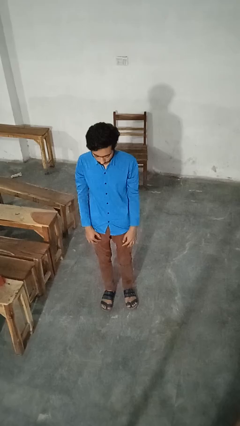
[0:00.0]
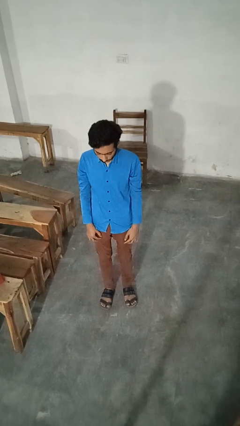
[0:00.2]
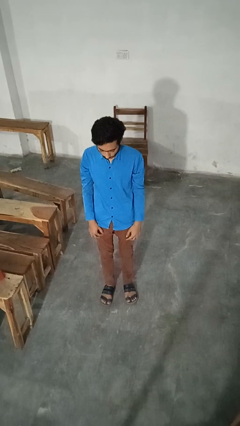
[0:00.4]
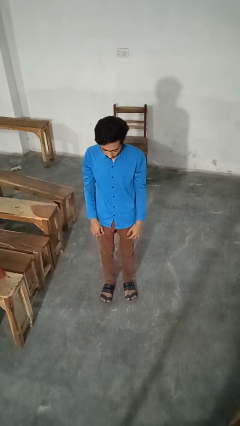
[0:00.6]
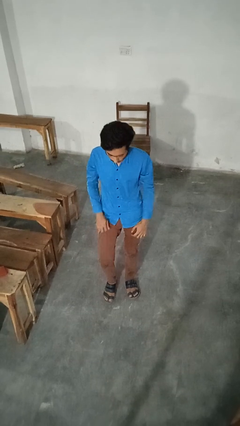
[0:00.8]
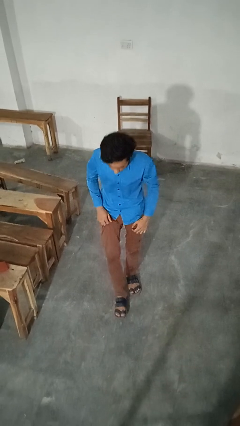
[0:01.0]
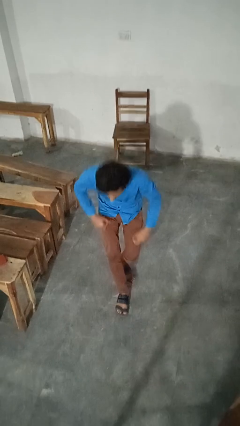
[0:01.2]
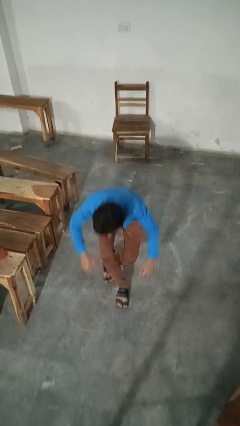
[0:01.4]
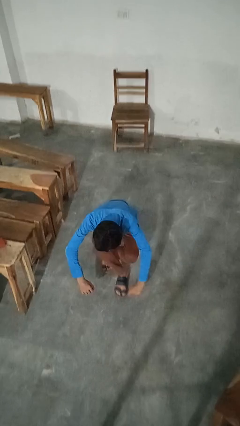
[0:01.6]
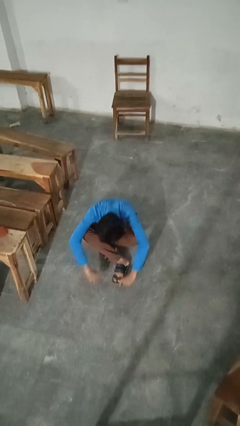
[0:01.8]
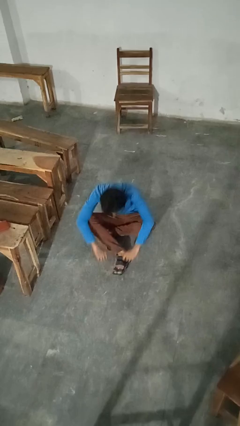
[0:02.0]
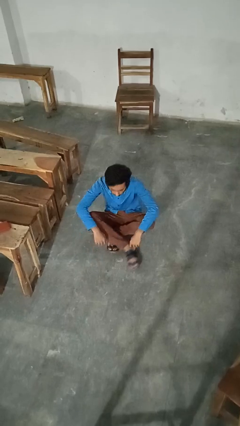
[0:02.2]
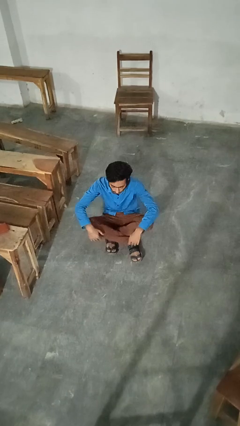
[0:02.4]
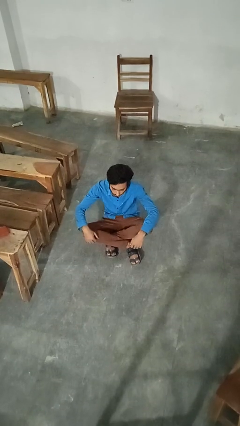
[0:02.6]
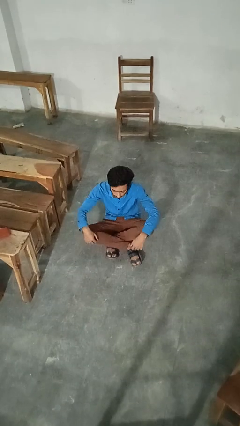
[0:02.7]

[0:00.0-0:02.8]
person sits crisscross

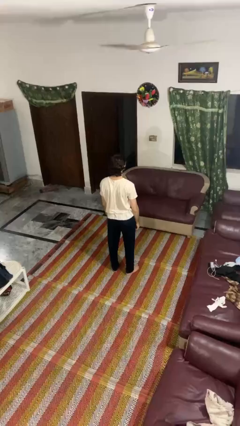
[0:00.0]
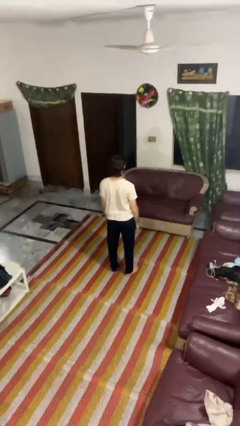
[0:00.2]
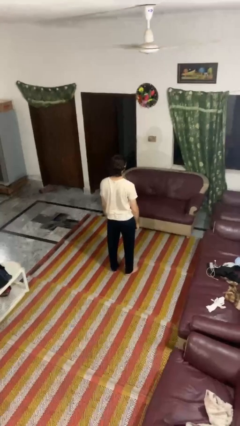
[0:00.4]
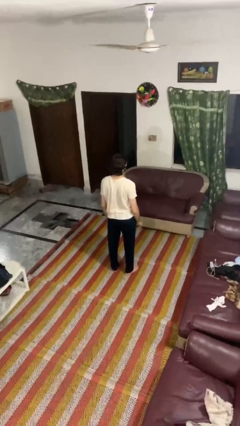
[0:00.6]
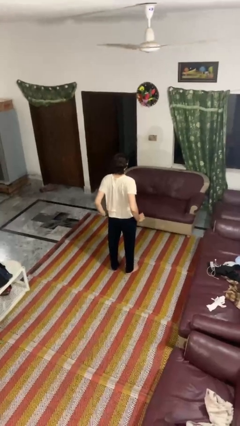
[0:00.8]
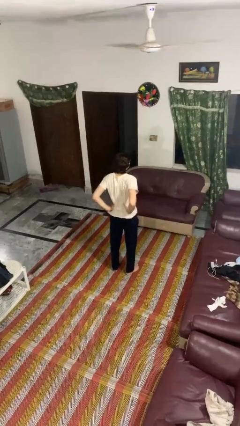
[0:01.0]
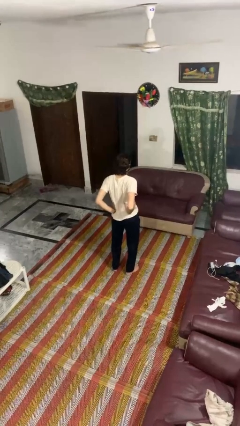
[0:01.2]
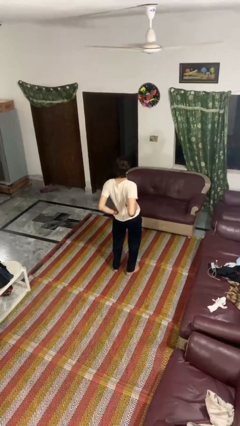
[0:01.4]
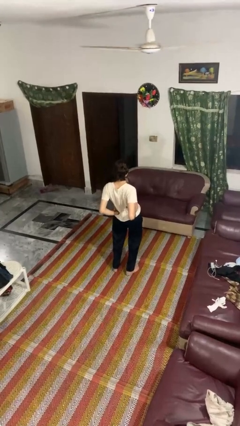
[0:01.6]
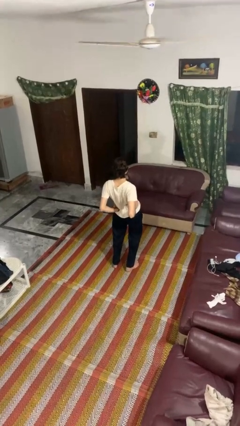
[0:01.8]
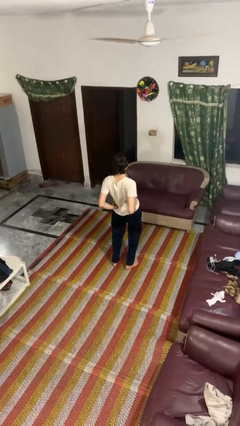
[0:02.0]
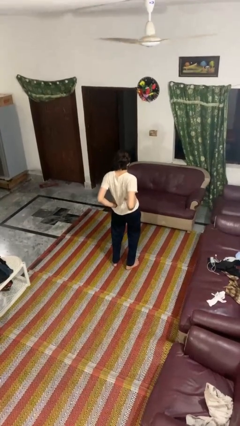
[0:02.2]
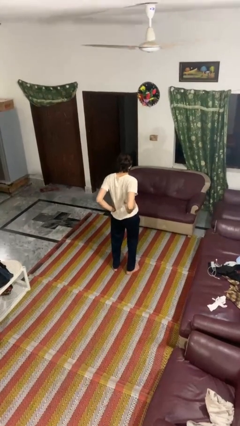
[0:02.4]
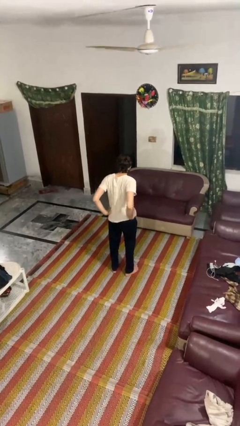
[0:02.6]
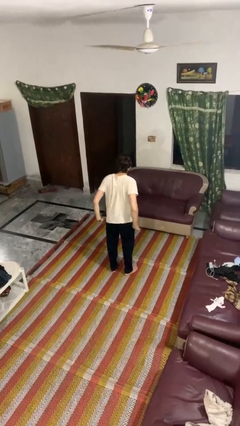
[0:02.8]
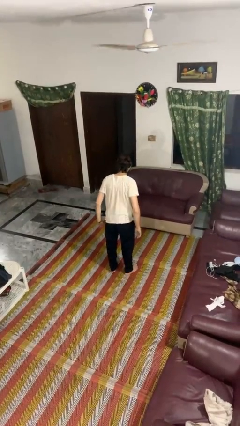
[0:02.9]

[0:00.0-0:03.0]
person stretches back

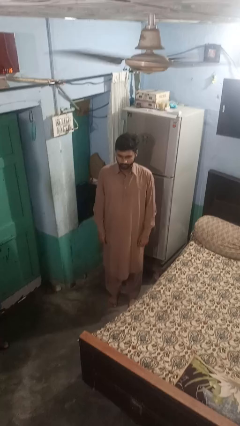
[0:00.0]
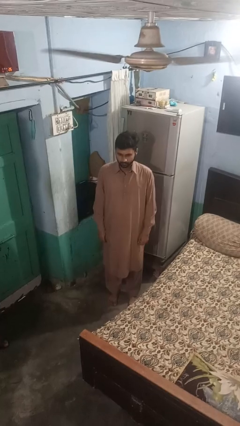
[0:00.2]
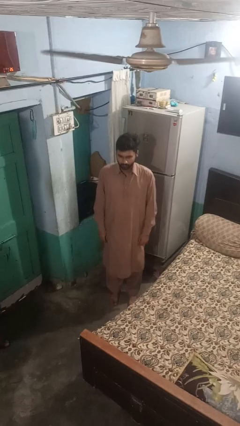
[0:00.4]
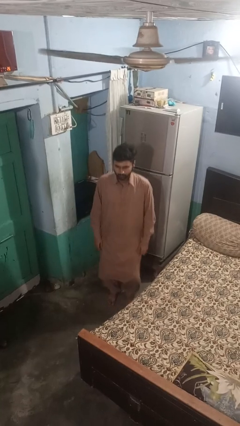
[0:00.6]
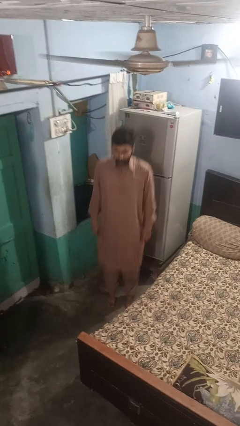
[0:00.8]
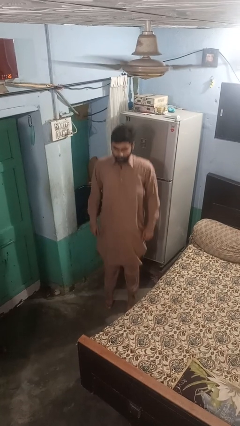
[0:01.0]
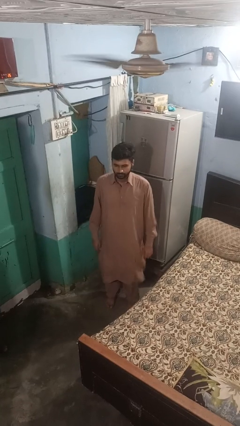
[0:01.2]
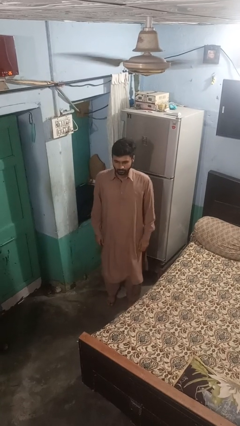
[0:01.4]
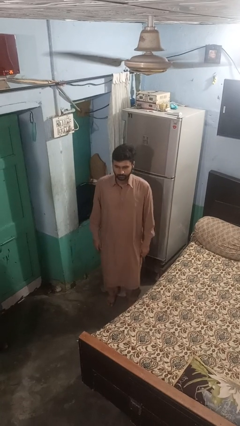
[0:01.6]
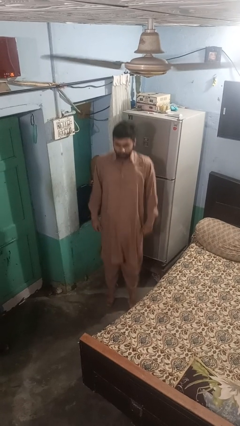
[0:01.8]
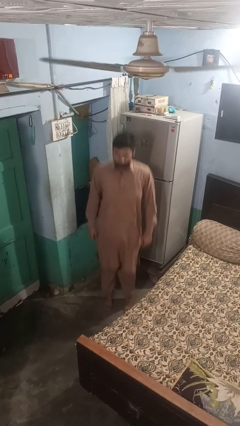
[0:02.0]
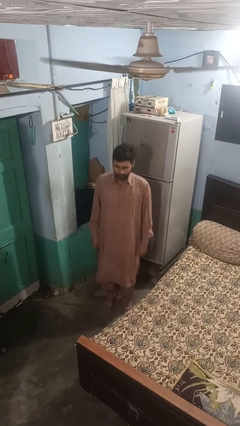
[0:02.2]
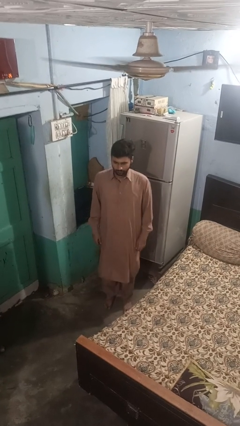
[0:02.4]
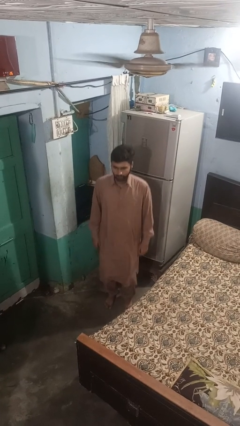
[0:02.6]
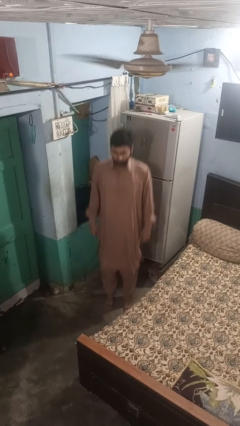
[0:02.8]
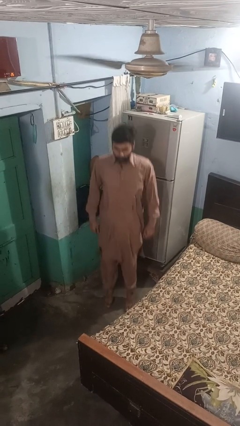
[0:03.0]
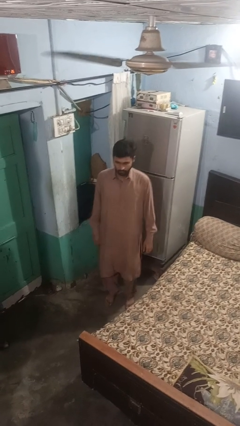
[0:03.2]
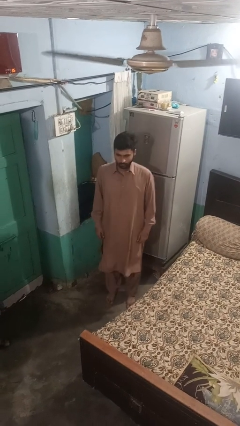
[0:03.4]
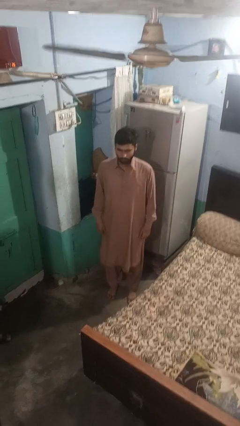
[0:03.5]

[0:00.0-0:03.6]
person jumps

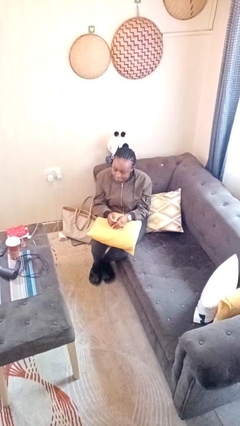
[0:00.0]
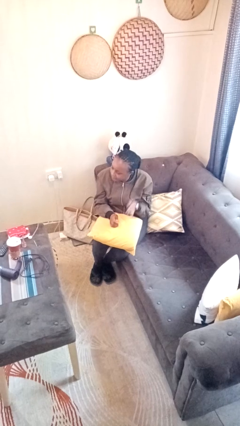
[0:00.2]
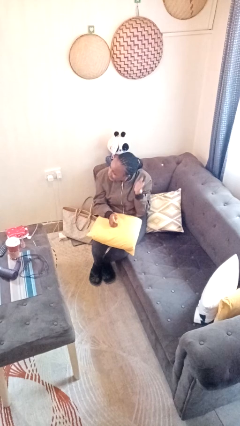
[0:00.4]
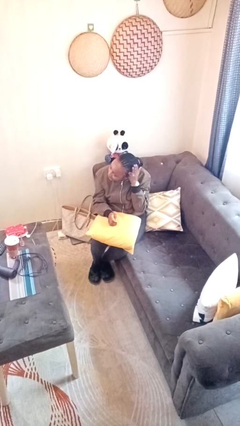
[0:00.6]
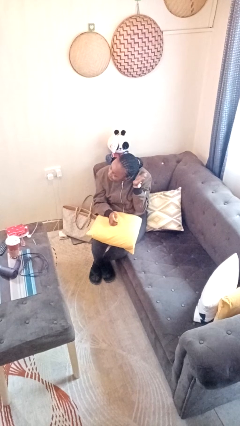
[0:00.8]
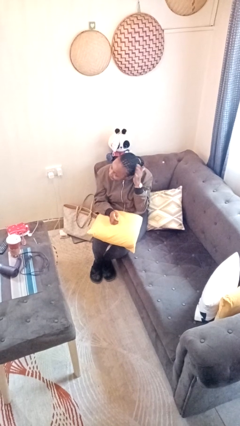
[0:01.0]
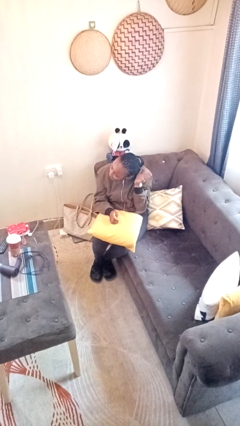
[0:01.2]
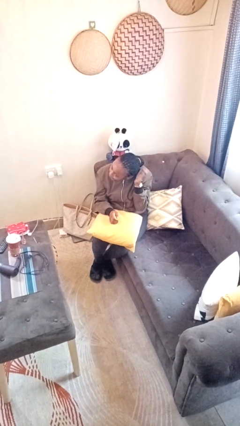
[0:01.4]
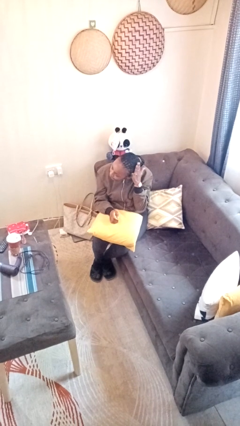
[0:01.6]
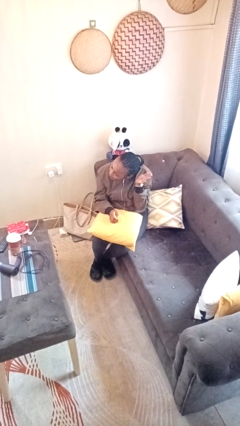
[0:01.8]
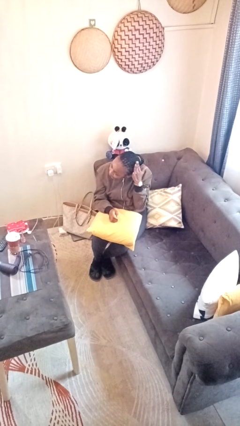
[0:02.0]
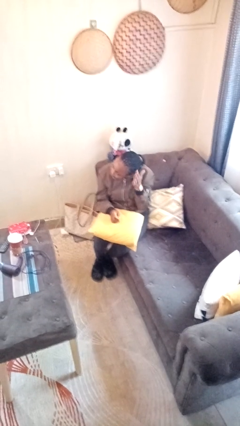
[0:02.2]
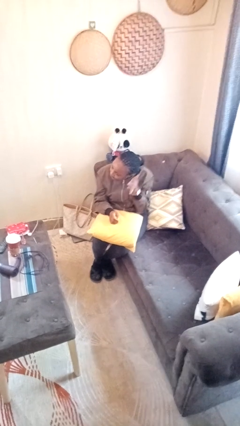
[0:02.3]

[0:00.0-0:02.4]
person pats head

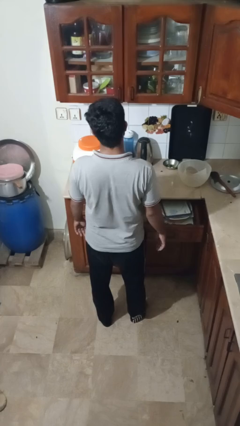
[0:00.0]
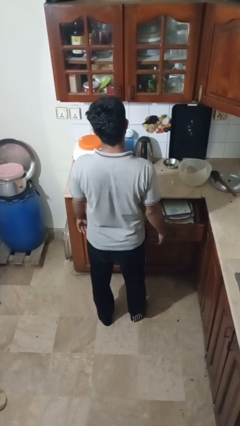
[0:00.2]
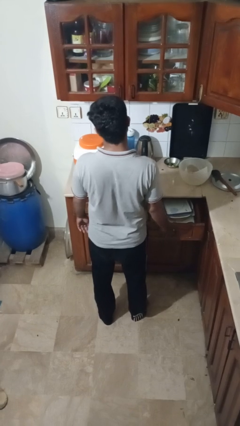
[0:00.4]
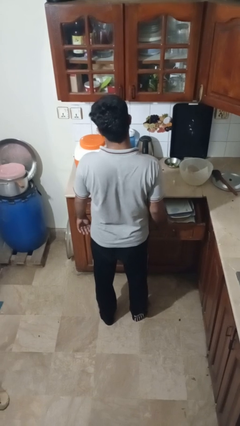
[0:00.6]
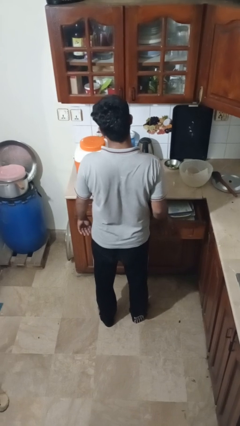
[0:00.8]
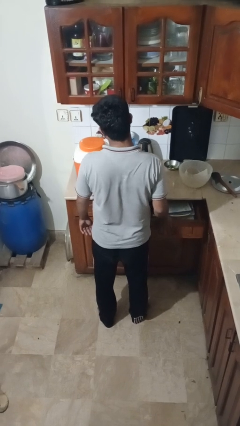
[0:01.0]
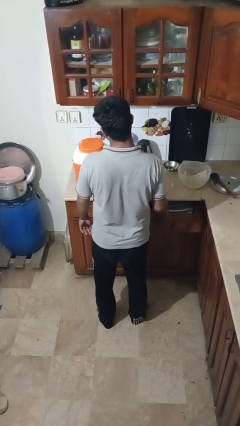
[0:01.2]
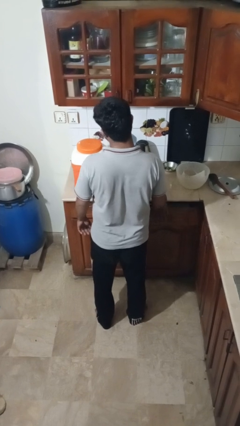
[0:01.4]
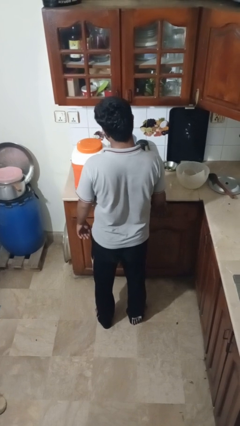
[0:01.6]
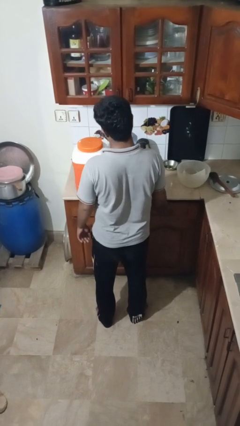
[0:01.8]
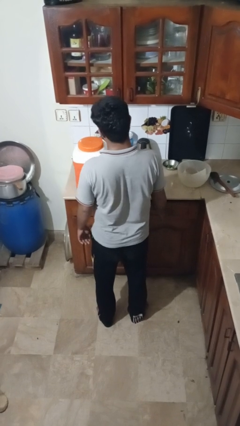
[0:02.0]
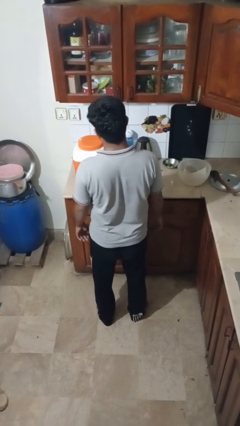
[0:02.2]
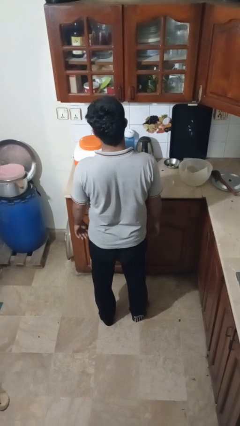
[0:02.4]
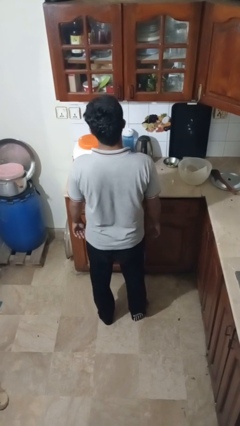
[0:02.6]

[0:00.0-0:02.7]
person closes kitchen drawer

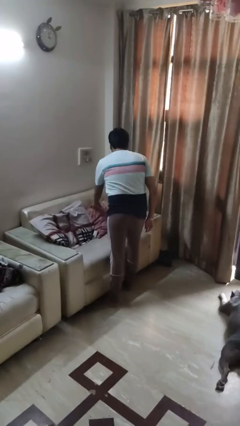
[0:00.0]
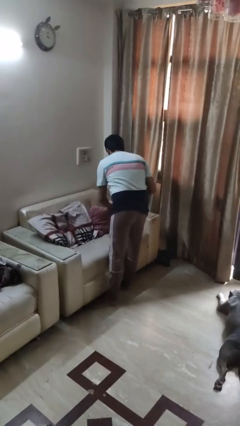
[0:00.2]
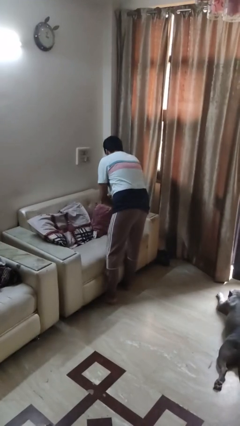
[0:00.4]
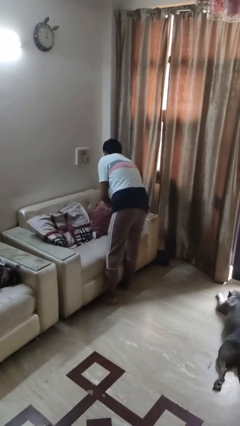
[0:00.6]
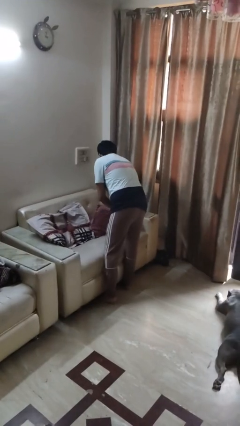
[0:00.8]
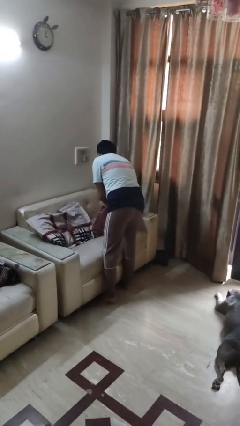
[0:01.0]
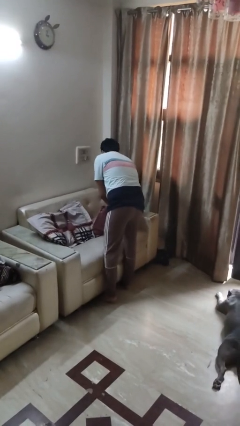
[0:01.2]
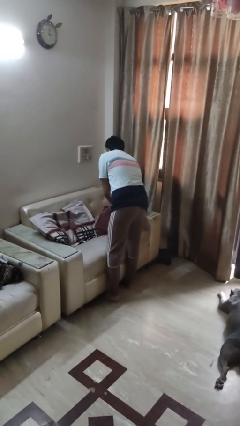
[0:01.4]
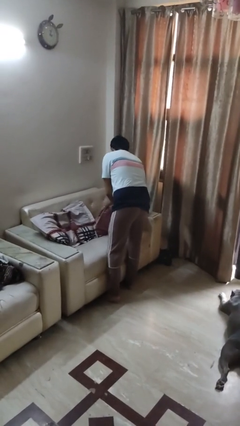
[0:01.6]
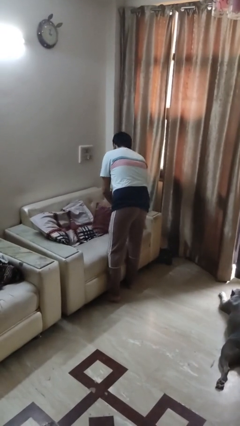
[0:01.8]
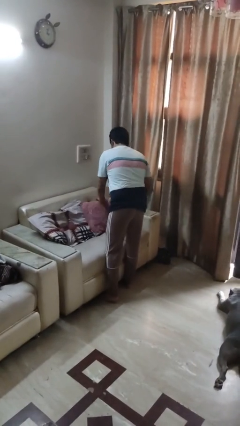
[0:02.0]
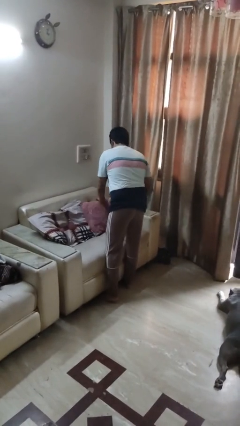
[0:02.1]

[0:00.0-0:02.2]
person searches in couch

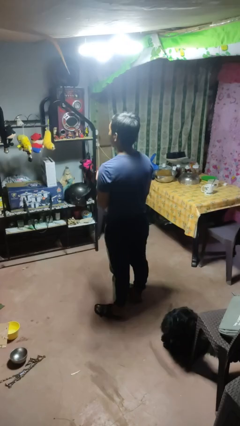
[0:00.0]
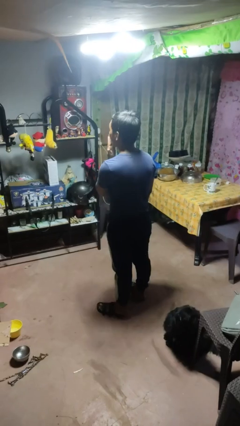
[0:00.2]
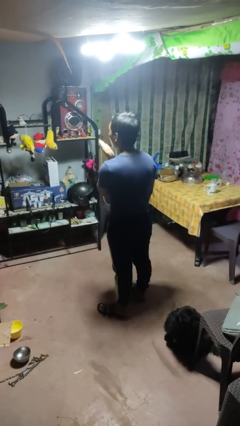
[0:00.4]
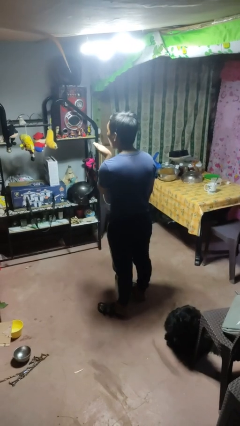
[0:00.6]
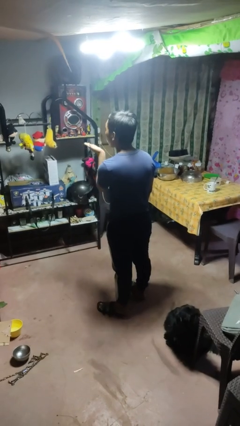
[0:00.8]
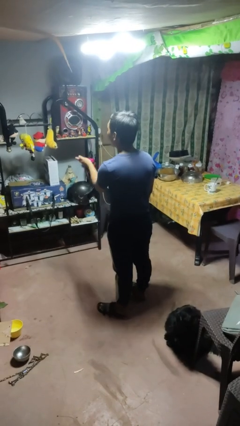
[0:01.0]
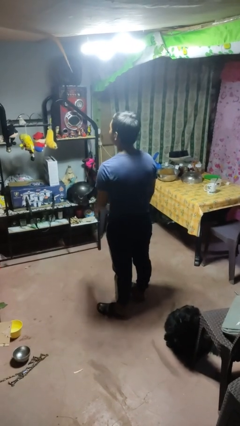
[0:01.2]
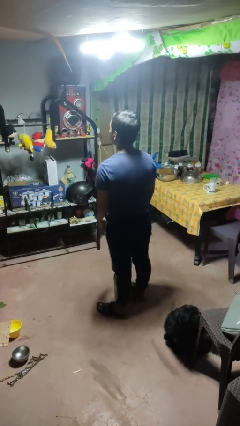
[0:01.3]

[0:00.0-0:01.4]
person gestures blow kiss
